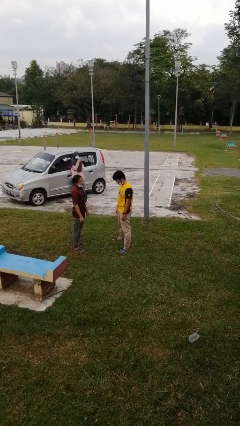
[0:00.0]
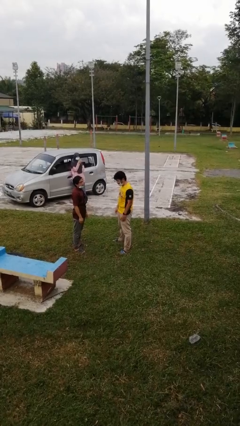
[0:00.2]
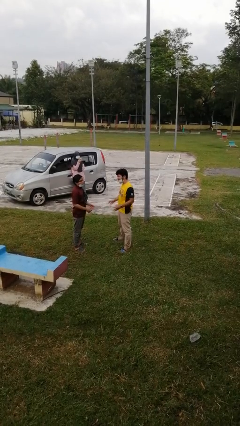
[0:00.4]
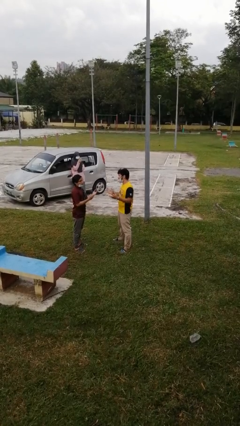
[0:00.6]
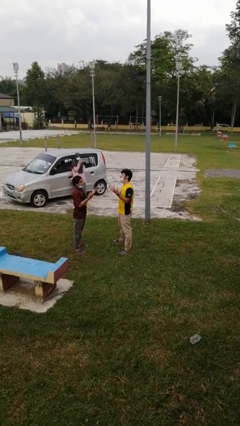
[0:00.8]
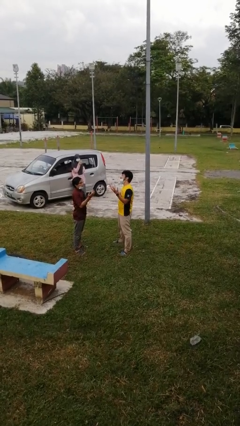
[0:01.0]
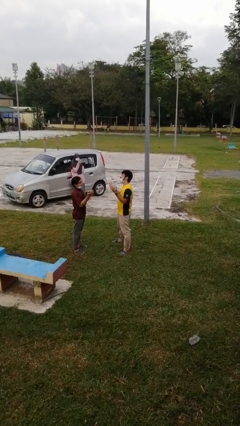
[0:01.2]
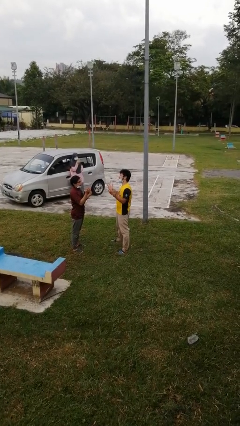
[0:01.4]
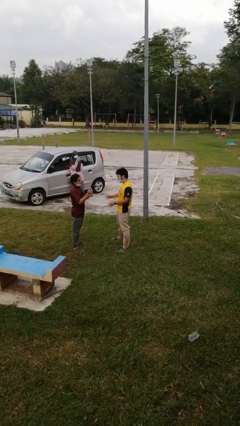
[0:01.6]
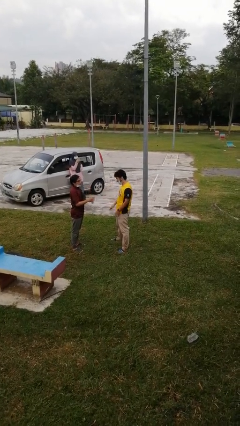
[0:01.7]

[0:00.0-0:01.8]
person talks to person

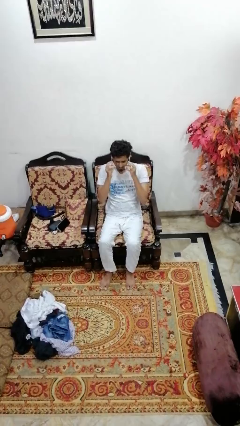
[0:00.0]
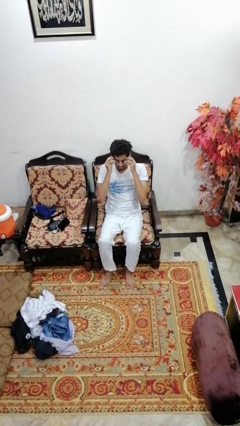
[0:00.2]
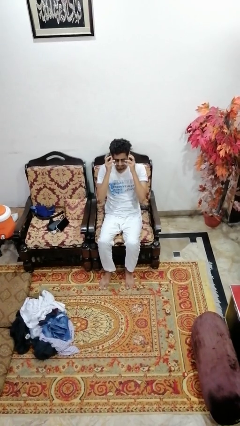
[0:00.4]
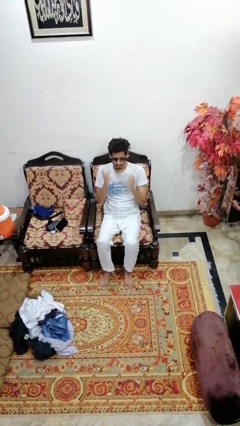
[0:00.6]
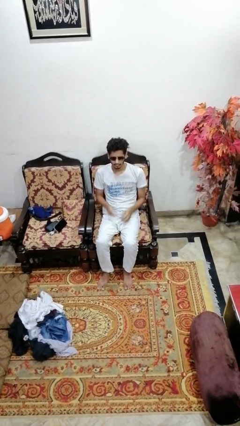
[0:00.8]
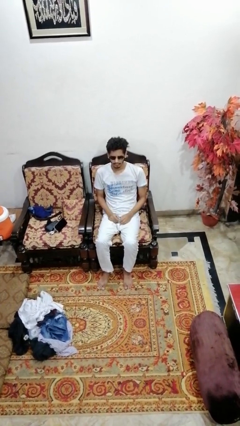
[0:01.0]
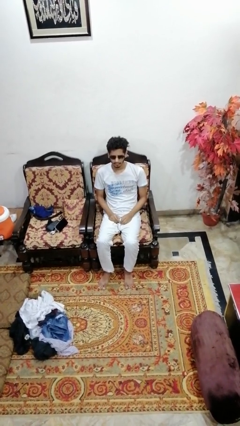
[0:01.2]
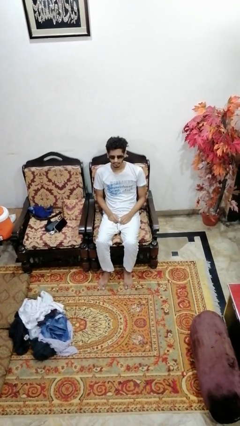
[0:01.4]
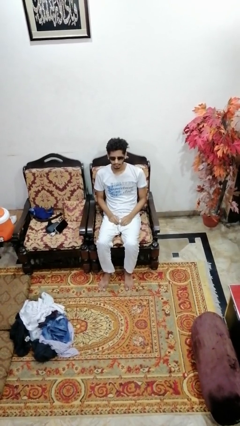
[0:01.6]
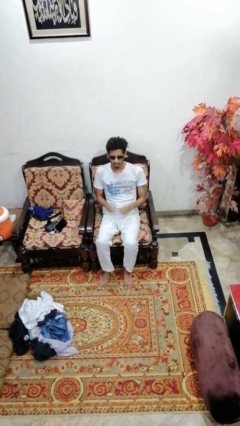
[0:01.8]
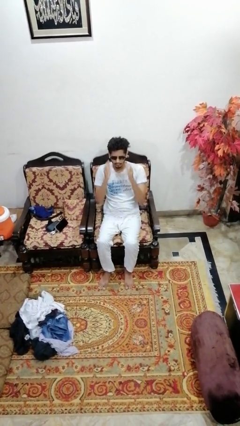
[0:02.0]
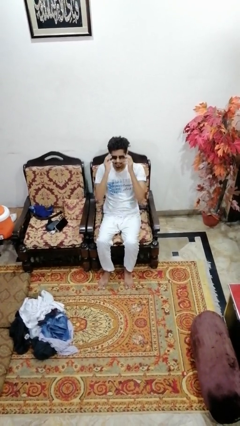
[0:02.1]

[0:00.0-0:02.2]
person puts on sunglasses

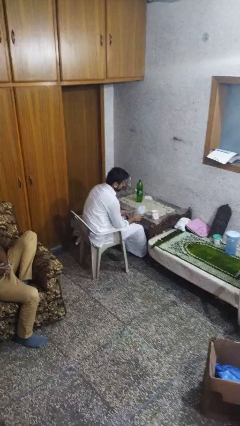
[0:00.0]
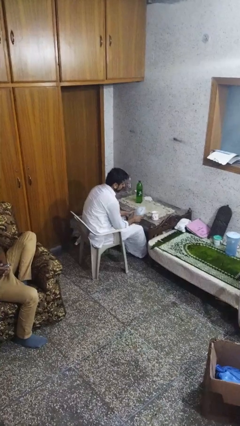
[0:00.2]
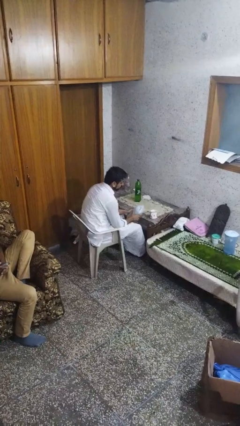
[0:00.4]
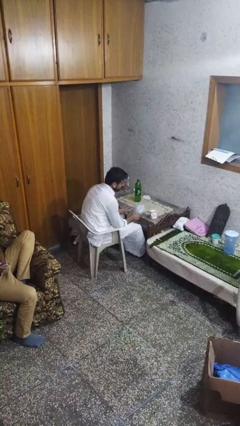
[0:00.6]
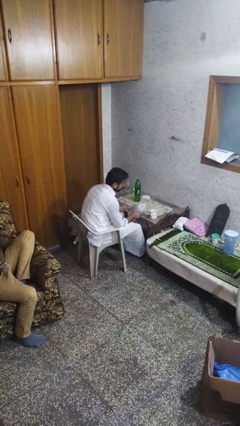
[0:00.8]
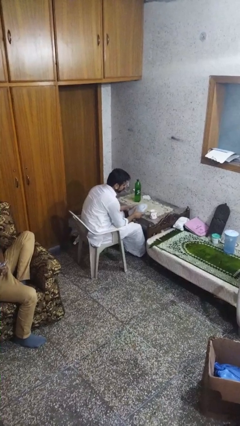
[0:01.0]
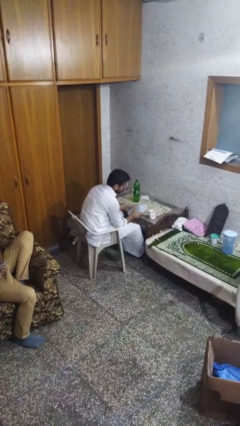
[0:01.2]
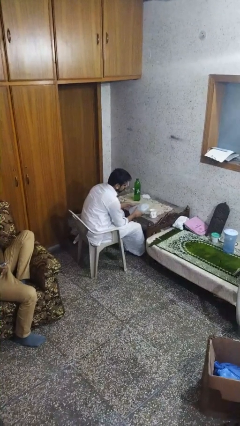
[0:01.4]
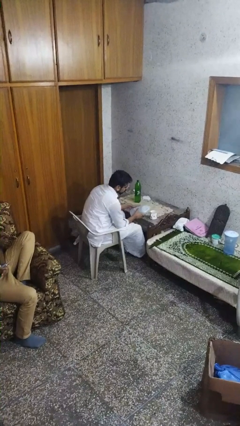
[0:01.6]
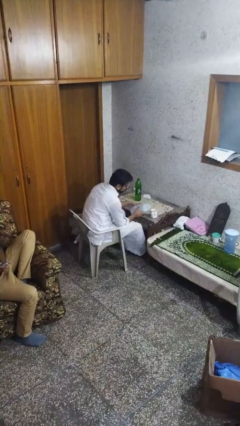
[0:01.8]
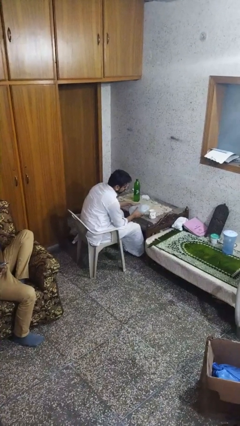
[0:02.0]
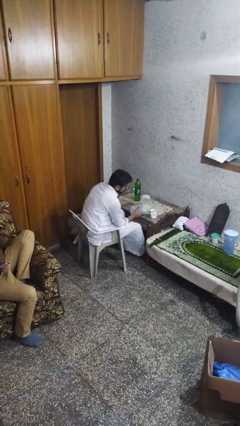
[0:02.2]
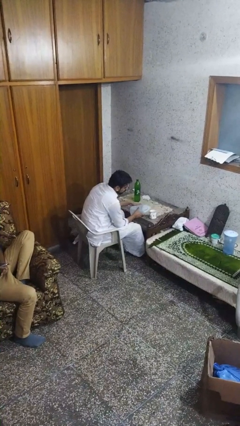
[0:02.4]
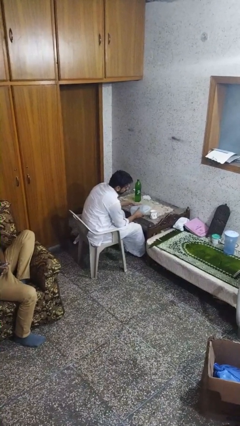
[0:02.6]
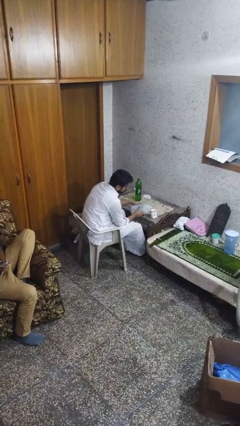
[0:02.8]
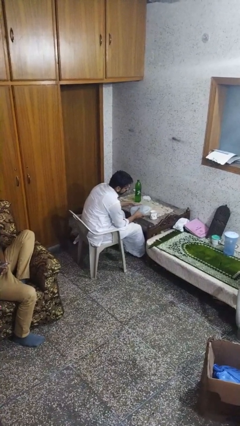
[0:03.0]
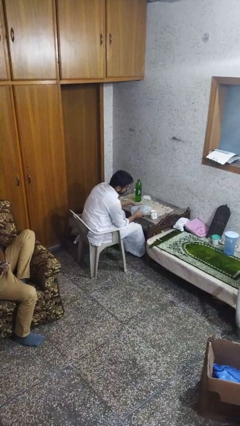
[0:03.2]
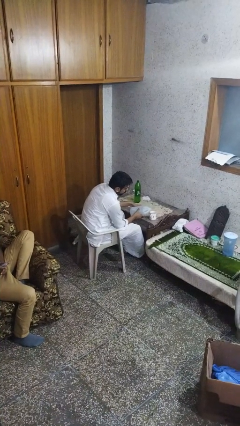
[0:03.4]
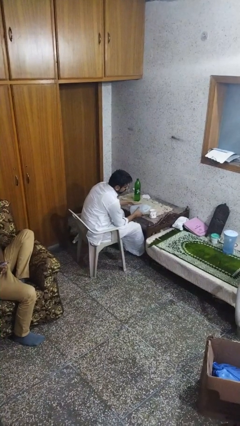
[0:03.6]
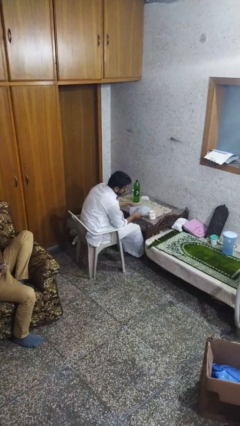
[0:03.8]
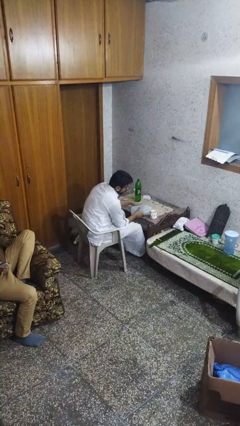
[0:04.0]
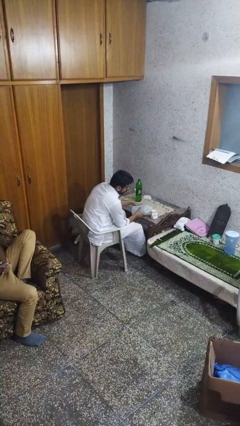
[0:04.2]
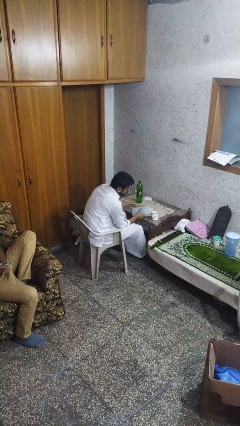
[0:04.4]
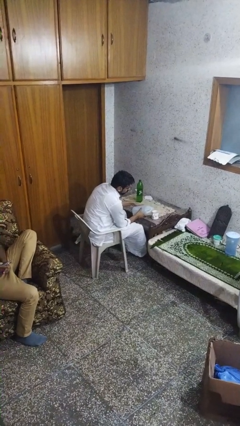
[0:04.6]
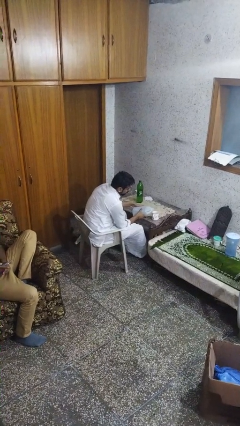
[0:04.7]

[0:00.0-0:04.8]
person pours liquid into cup

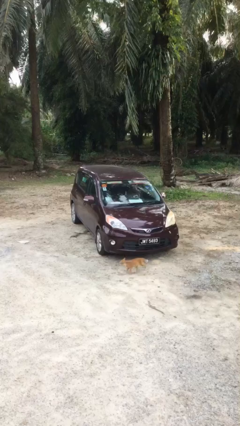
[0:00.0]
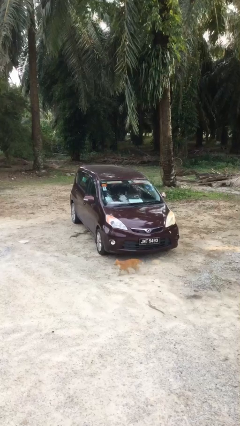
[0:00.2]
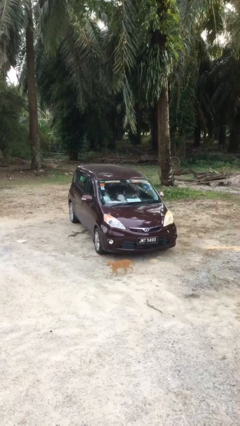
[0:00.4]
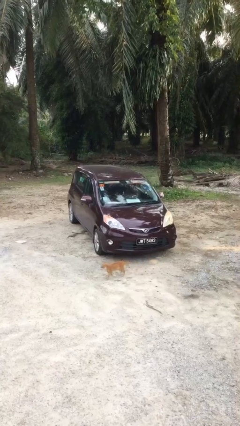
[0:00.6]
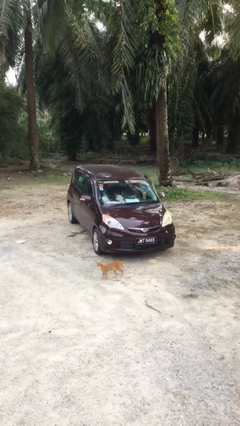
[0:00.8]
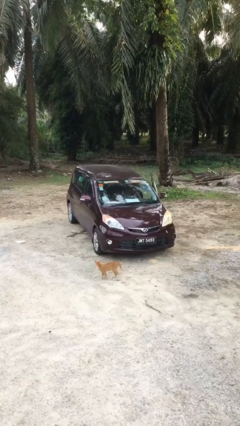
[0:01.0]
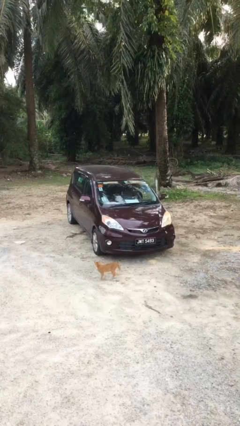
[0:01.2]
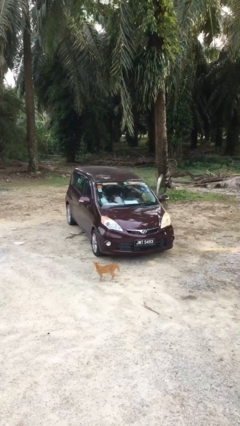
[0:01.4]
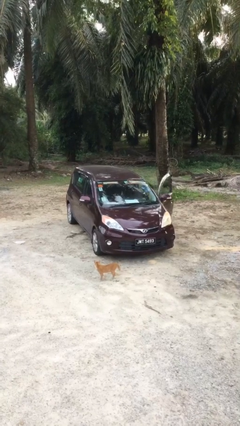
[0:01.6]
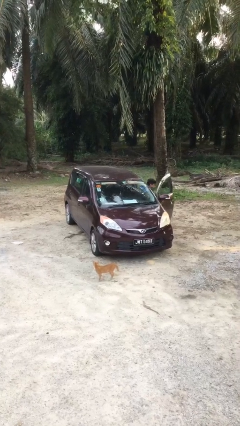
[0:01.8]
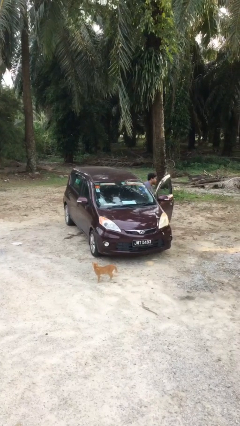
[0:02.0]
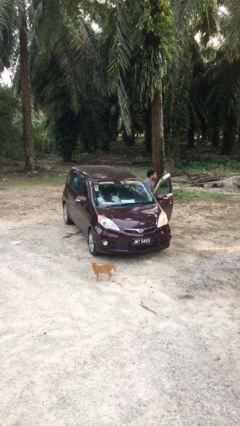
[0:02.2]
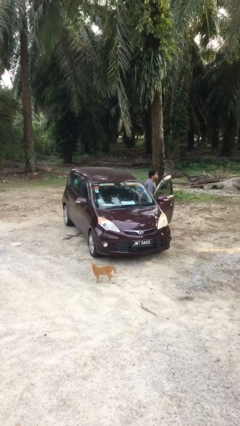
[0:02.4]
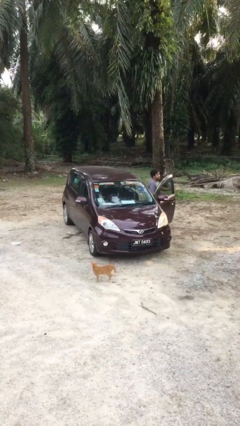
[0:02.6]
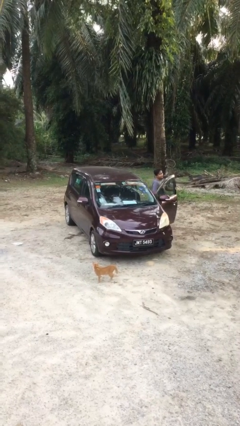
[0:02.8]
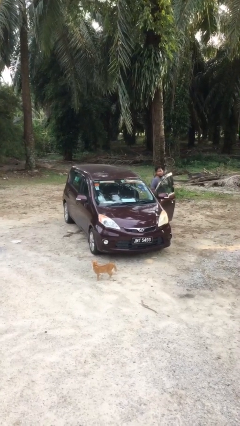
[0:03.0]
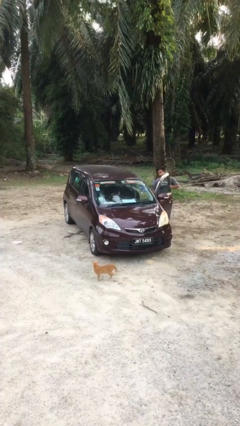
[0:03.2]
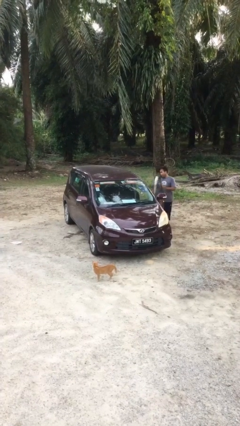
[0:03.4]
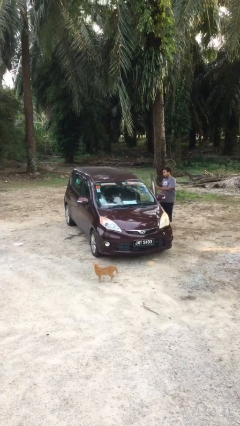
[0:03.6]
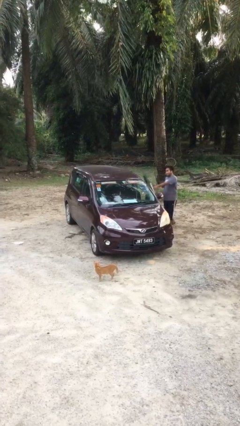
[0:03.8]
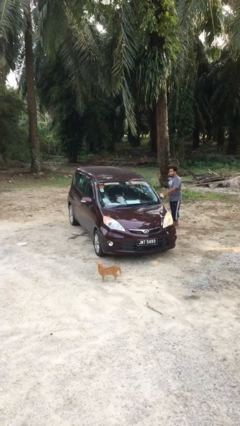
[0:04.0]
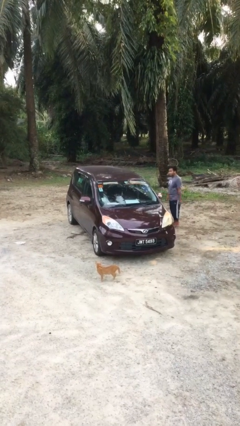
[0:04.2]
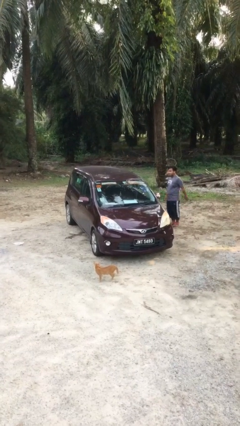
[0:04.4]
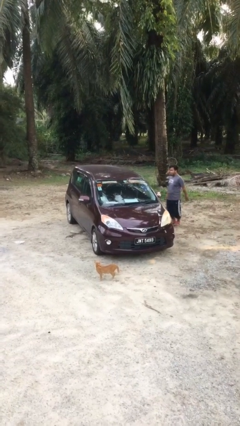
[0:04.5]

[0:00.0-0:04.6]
car drops off person

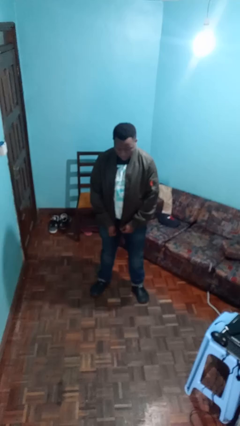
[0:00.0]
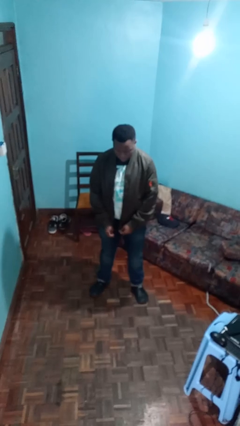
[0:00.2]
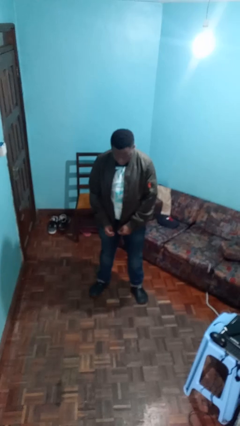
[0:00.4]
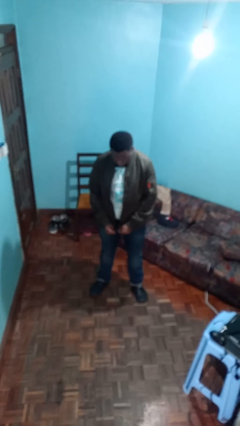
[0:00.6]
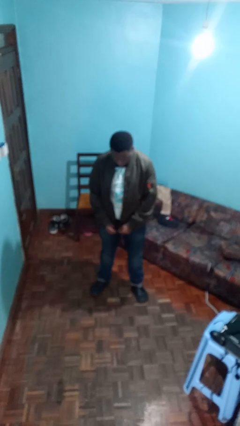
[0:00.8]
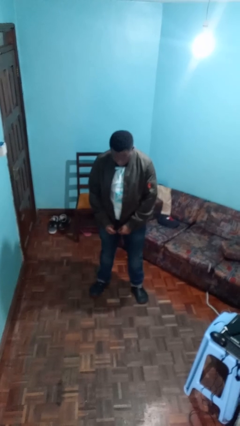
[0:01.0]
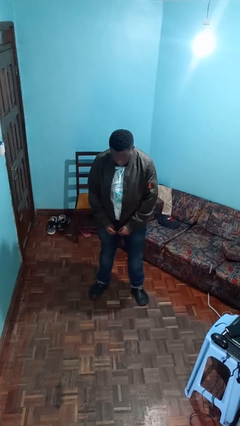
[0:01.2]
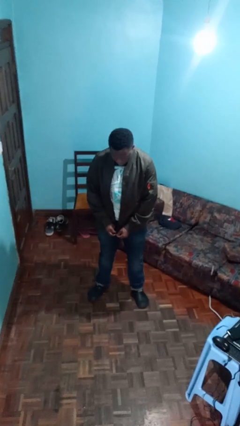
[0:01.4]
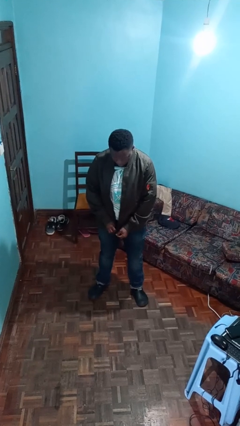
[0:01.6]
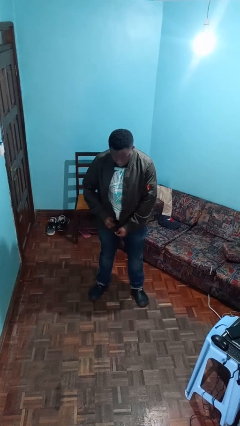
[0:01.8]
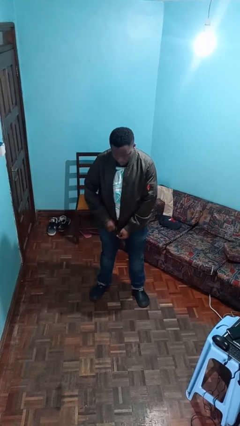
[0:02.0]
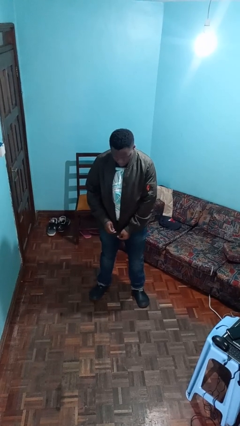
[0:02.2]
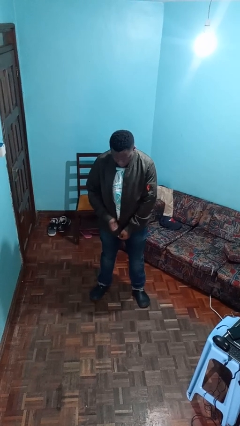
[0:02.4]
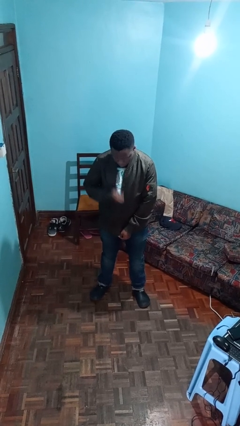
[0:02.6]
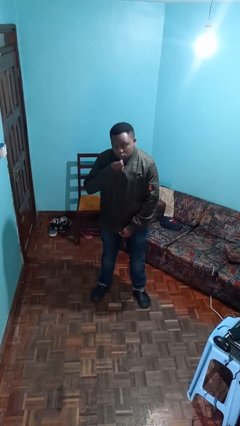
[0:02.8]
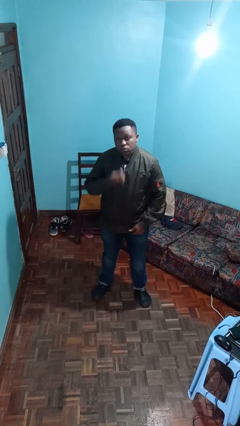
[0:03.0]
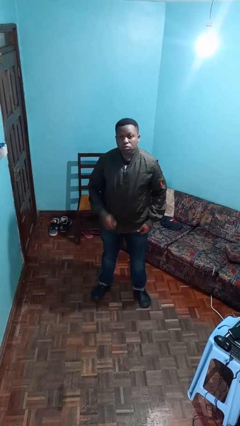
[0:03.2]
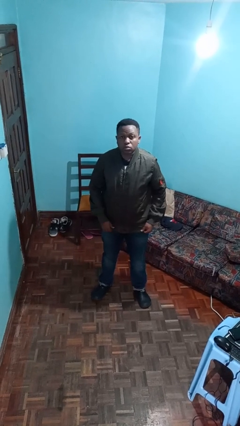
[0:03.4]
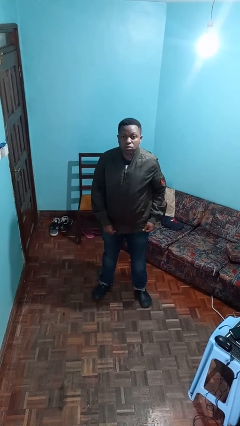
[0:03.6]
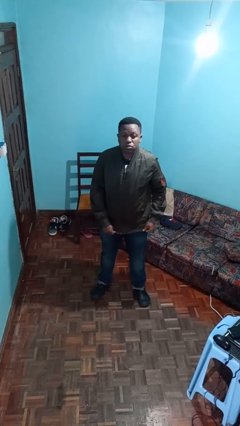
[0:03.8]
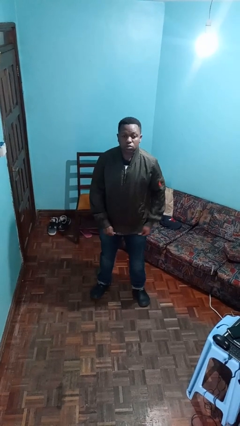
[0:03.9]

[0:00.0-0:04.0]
person zips up jacket

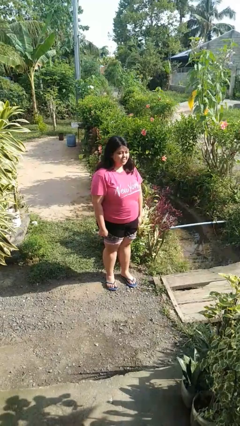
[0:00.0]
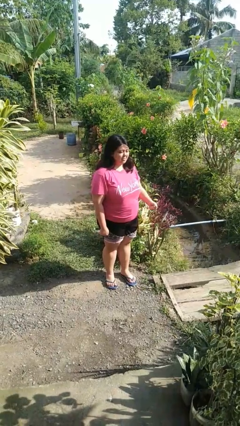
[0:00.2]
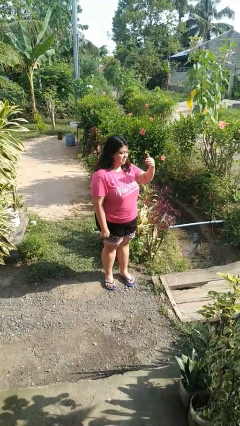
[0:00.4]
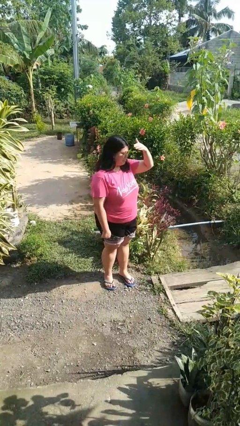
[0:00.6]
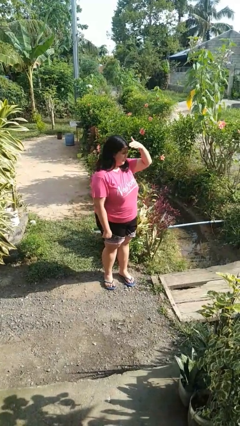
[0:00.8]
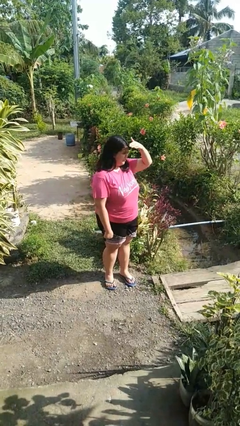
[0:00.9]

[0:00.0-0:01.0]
person shades eyes
